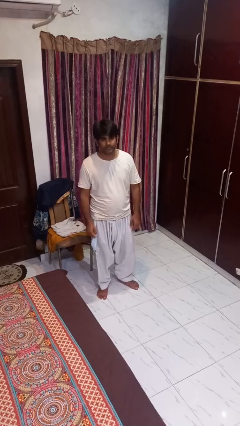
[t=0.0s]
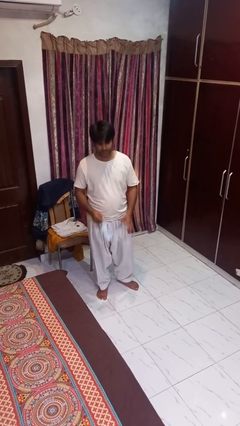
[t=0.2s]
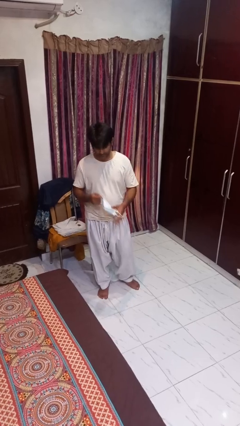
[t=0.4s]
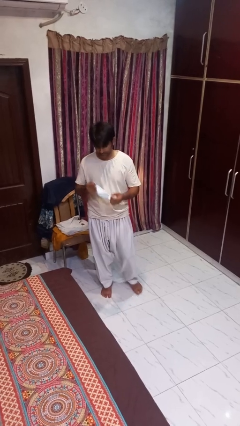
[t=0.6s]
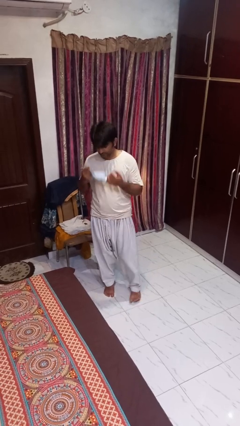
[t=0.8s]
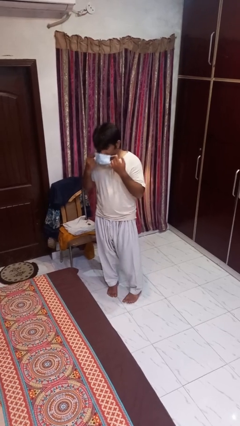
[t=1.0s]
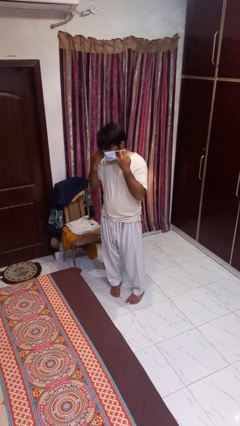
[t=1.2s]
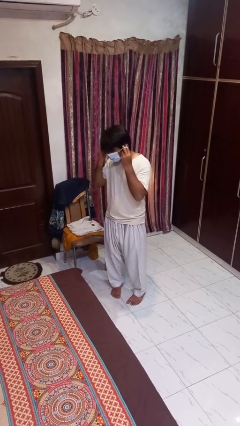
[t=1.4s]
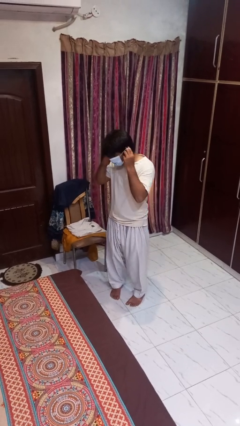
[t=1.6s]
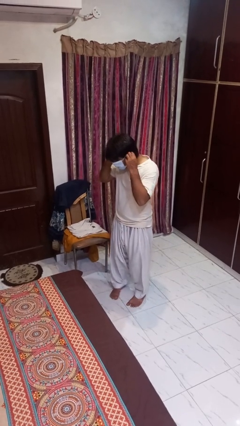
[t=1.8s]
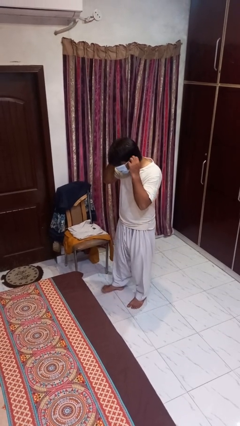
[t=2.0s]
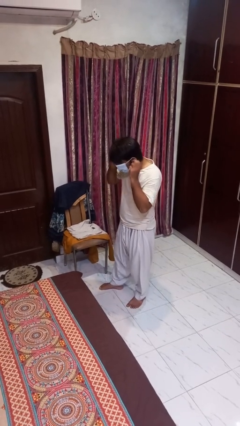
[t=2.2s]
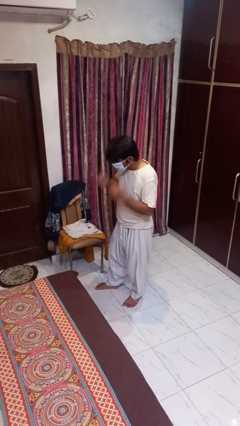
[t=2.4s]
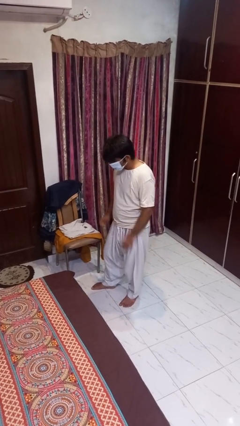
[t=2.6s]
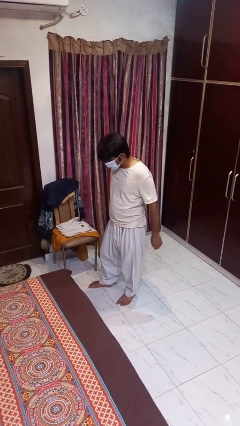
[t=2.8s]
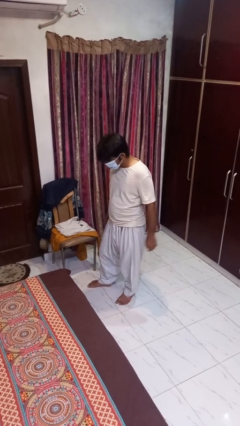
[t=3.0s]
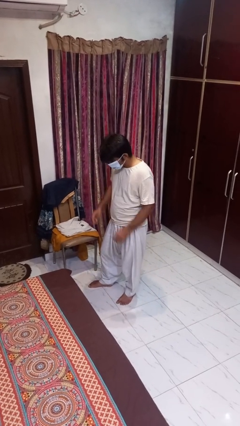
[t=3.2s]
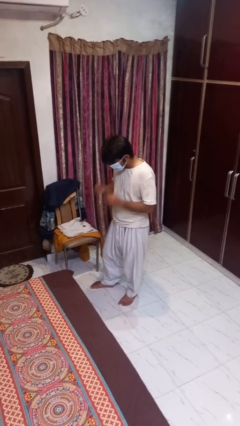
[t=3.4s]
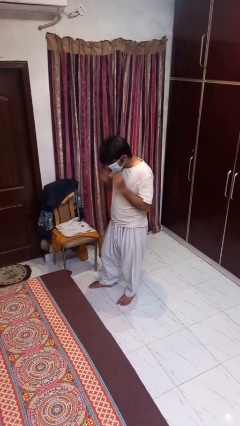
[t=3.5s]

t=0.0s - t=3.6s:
person puts on facemask

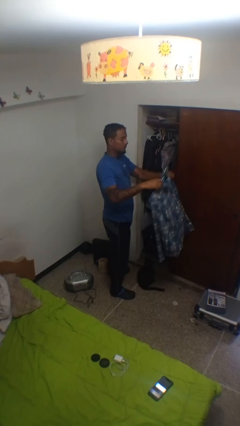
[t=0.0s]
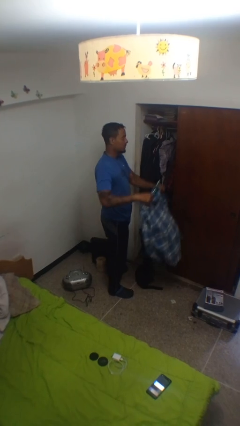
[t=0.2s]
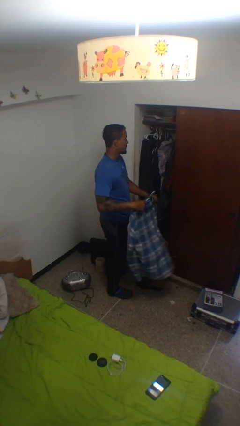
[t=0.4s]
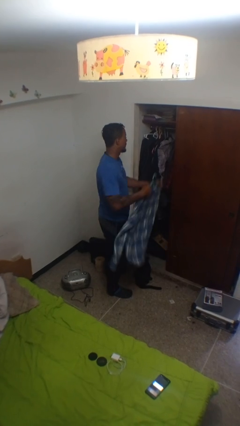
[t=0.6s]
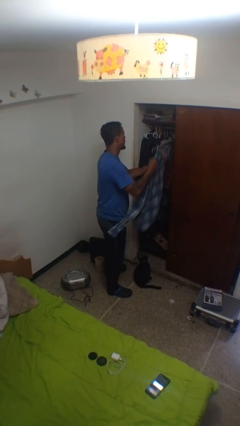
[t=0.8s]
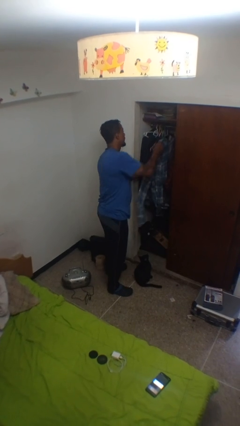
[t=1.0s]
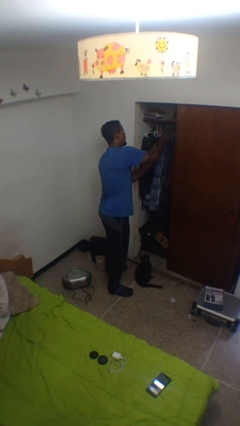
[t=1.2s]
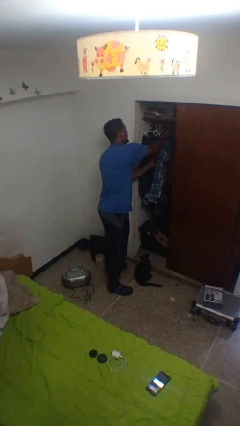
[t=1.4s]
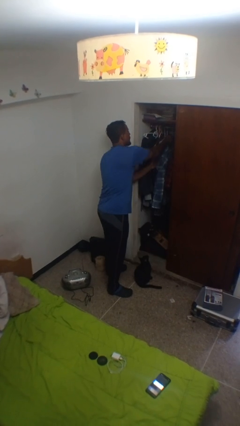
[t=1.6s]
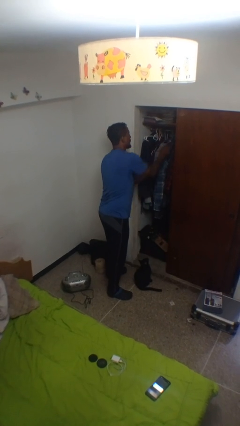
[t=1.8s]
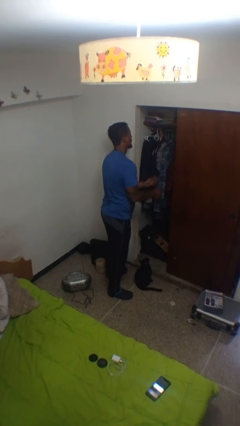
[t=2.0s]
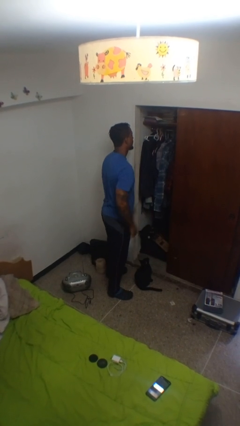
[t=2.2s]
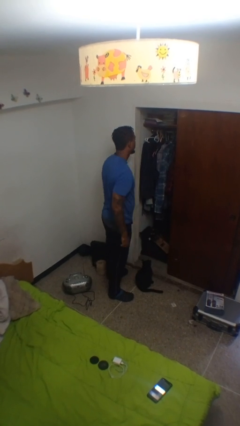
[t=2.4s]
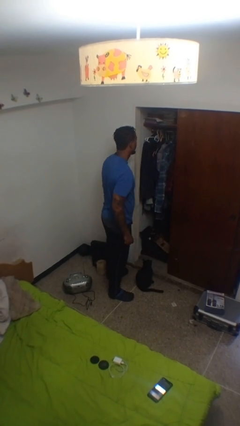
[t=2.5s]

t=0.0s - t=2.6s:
person puts clothes into closet

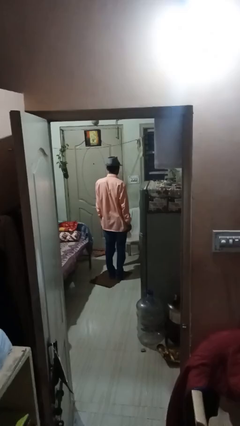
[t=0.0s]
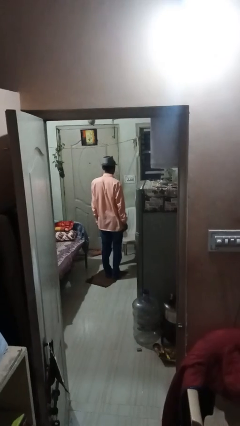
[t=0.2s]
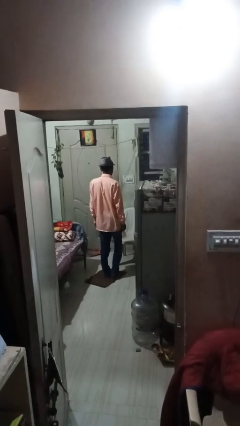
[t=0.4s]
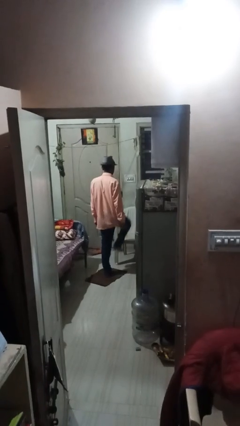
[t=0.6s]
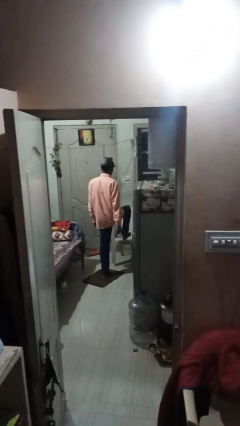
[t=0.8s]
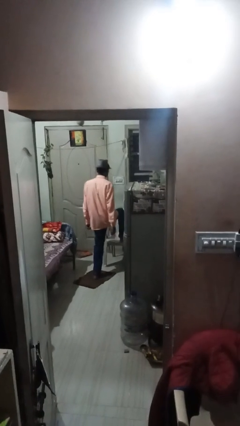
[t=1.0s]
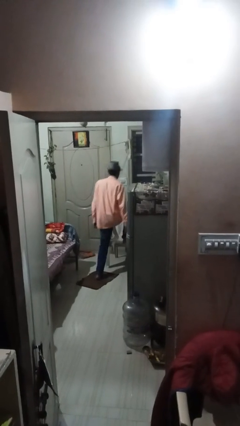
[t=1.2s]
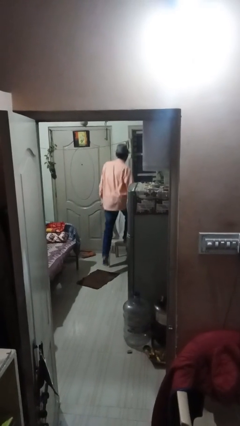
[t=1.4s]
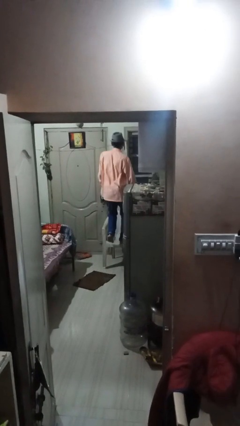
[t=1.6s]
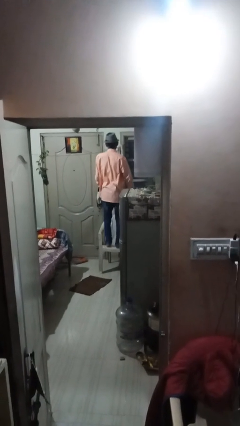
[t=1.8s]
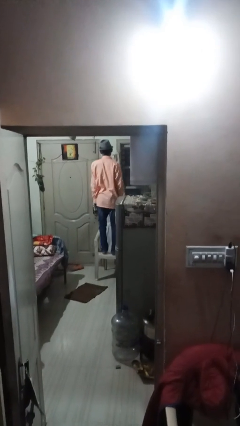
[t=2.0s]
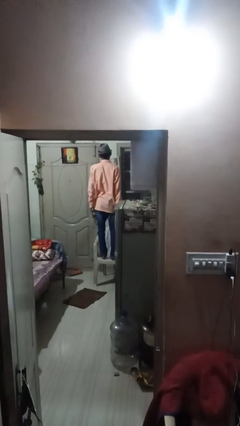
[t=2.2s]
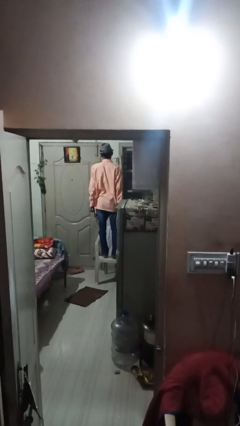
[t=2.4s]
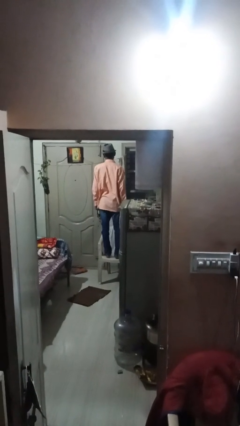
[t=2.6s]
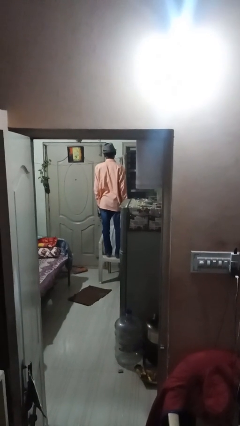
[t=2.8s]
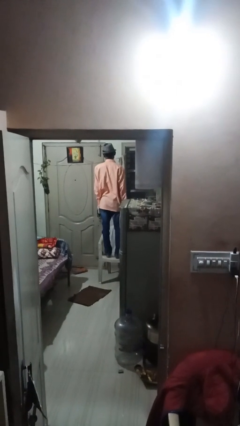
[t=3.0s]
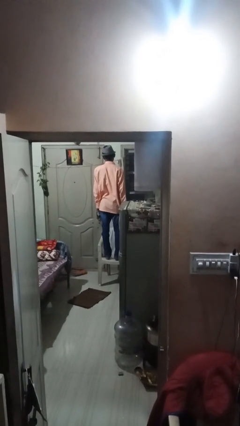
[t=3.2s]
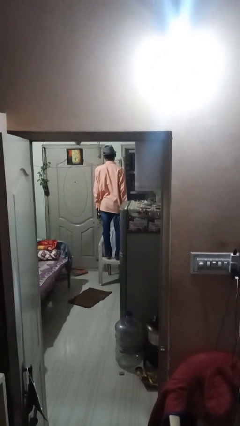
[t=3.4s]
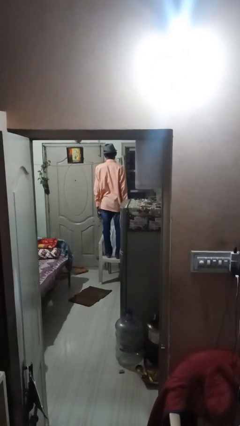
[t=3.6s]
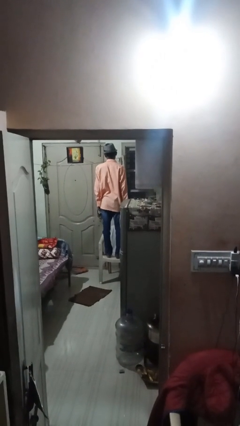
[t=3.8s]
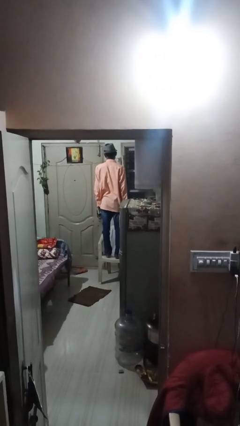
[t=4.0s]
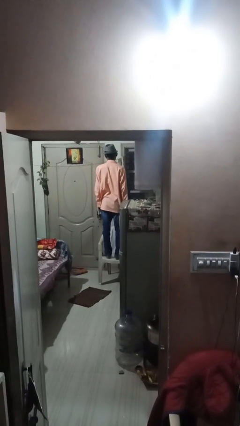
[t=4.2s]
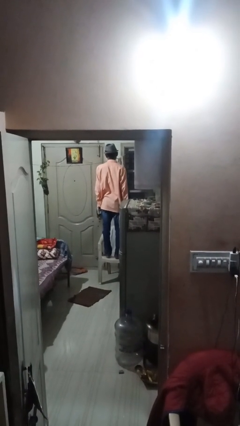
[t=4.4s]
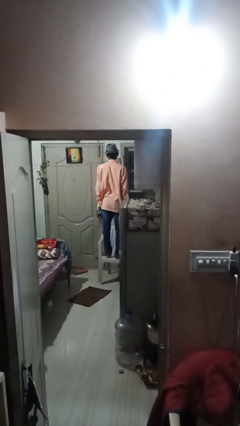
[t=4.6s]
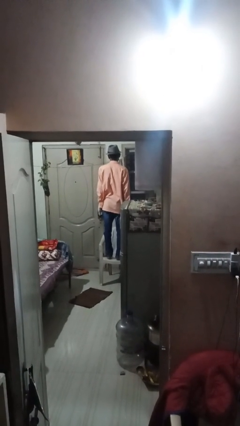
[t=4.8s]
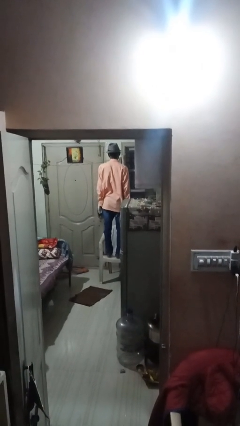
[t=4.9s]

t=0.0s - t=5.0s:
person climbs on chair

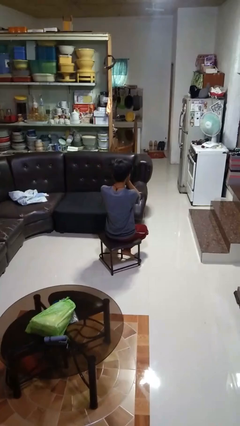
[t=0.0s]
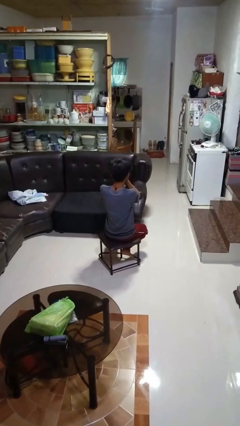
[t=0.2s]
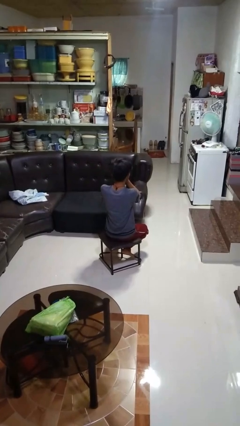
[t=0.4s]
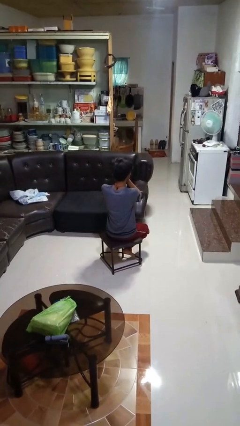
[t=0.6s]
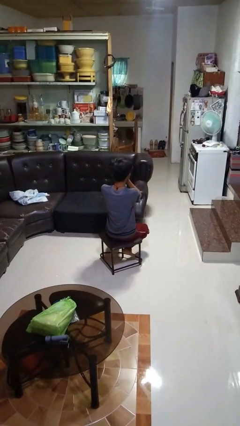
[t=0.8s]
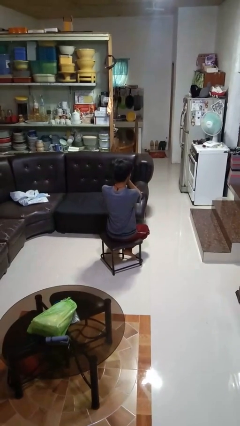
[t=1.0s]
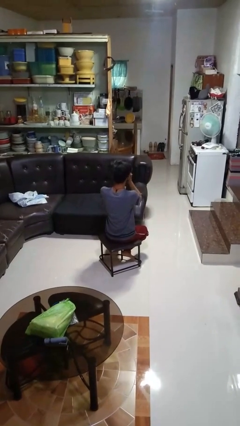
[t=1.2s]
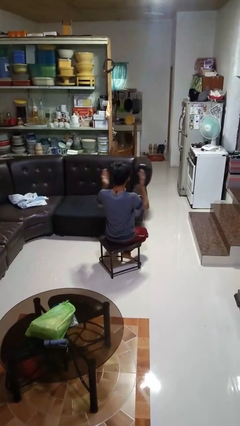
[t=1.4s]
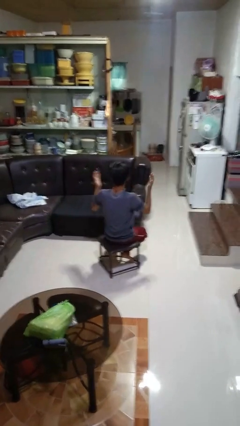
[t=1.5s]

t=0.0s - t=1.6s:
person covers face with hands

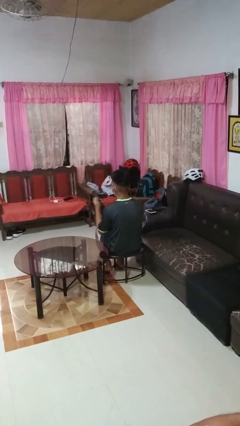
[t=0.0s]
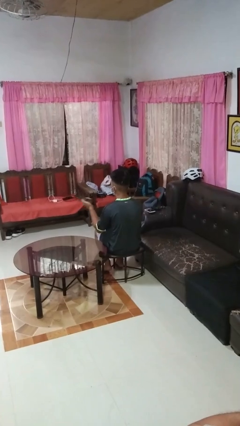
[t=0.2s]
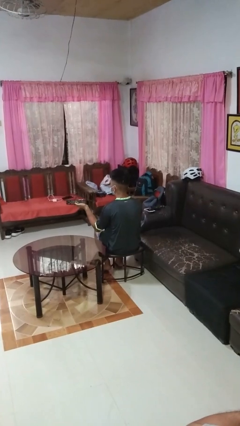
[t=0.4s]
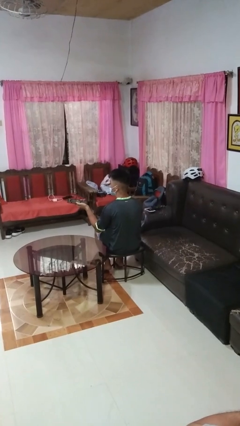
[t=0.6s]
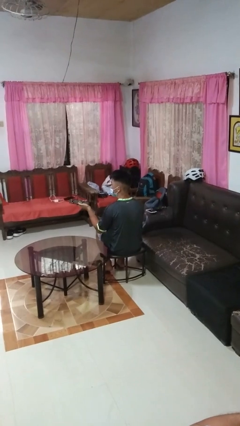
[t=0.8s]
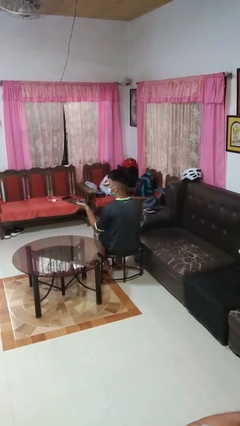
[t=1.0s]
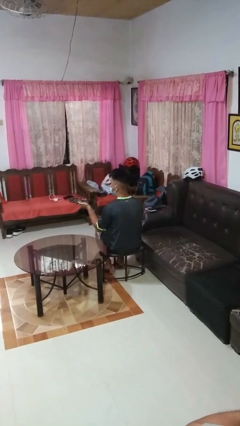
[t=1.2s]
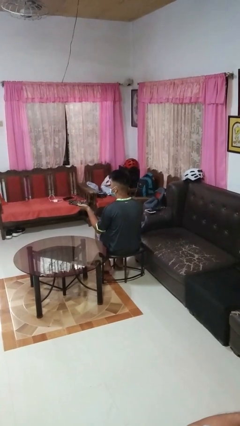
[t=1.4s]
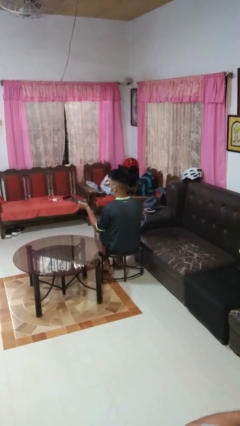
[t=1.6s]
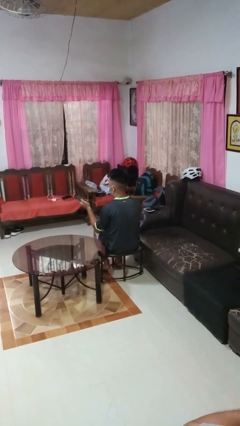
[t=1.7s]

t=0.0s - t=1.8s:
person uses television remote

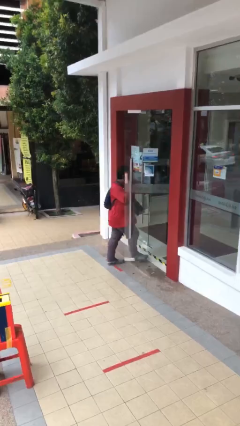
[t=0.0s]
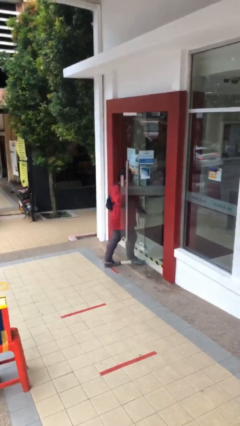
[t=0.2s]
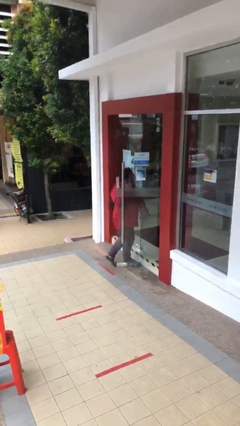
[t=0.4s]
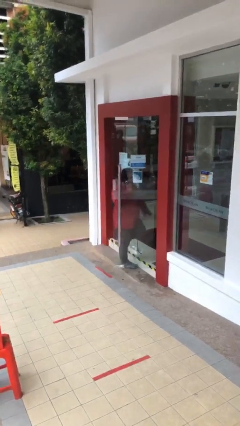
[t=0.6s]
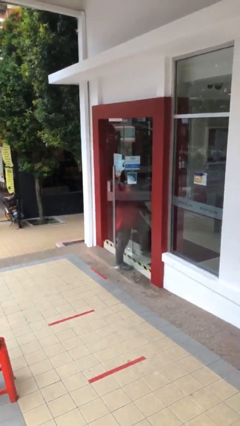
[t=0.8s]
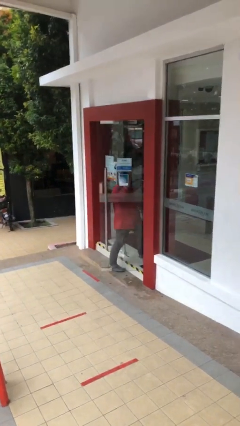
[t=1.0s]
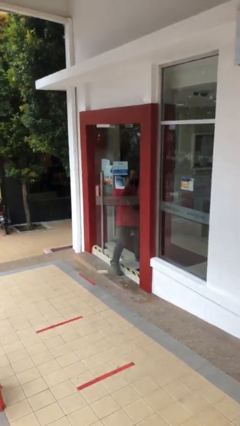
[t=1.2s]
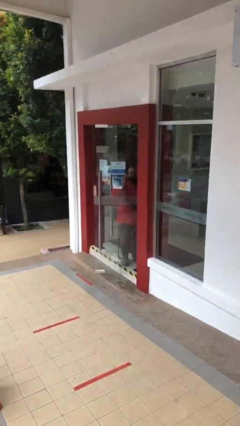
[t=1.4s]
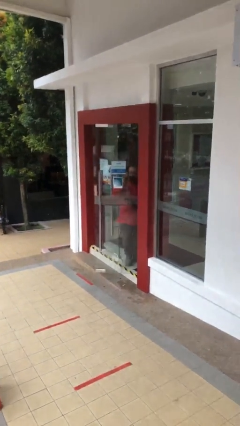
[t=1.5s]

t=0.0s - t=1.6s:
person exits scene through structure

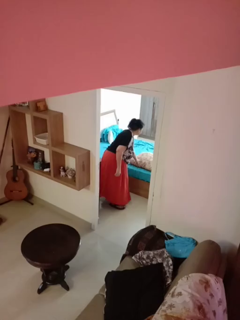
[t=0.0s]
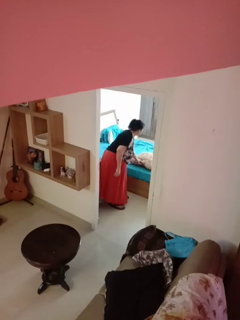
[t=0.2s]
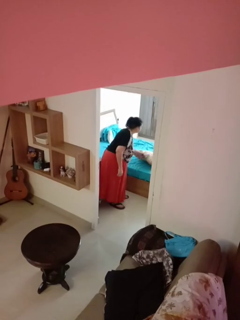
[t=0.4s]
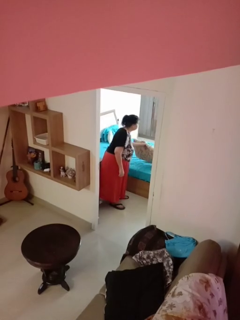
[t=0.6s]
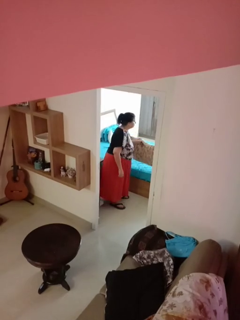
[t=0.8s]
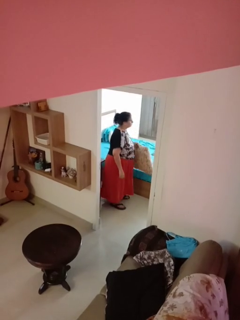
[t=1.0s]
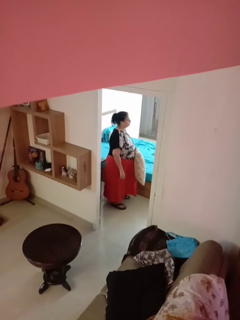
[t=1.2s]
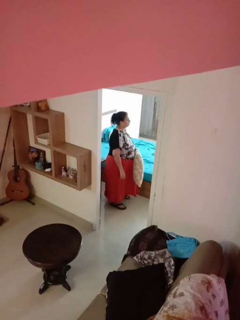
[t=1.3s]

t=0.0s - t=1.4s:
person picks up object from bed
